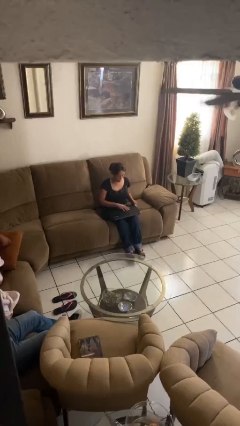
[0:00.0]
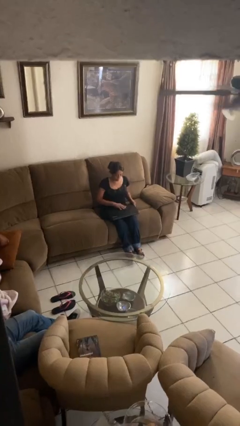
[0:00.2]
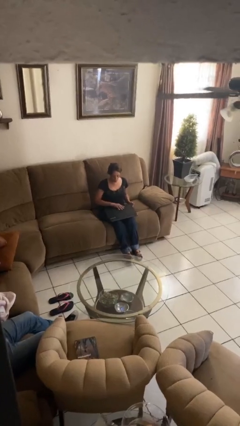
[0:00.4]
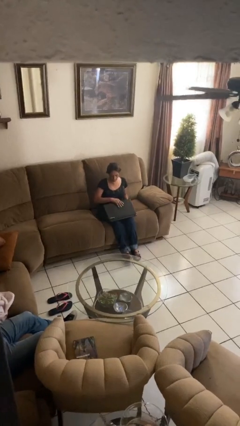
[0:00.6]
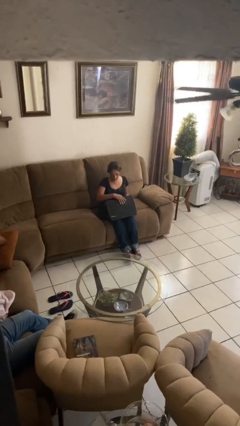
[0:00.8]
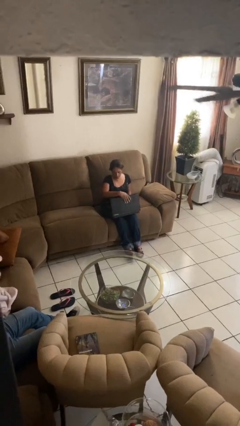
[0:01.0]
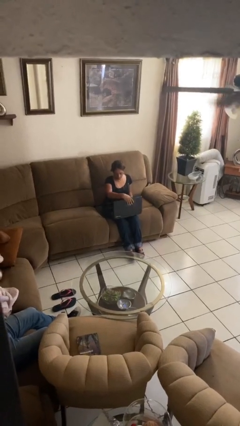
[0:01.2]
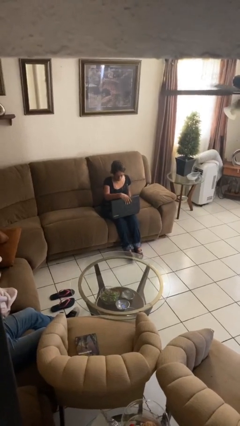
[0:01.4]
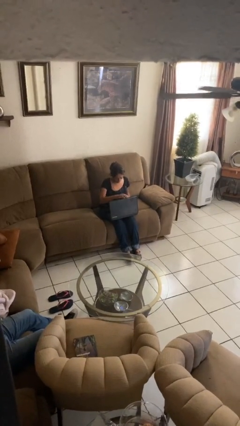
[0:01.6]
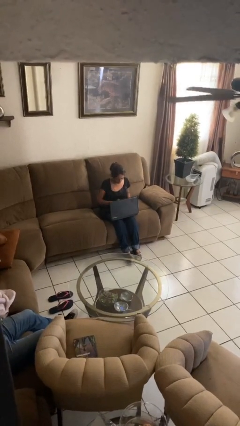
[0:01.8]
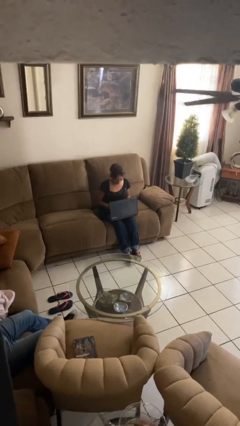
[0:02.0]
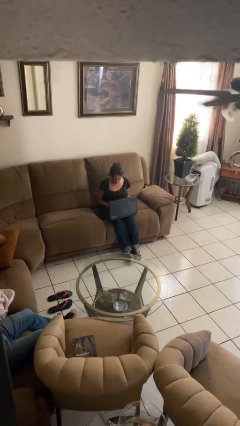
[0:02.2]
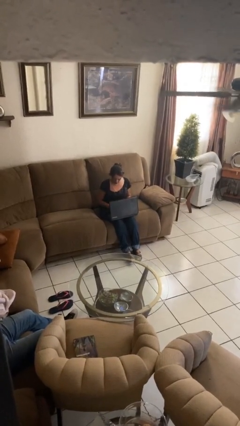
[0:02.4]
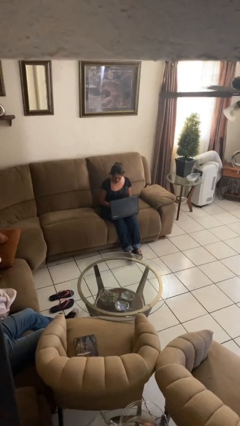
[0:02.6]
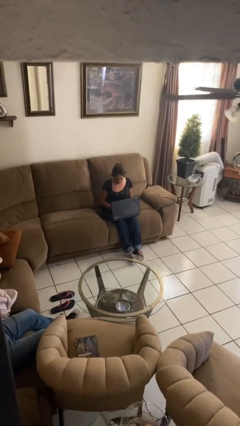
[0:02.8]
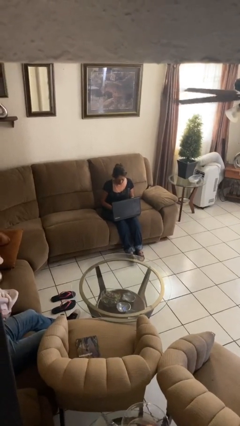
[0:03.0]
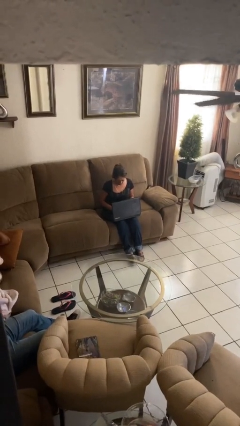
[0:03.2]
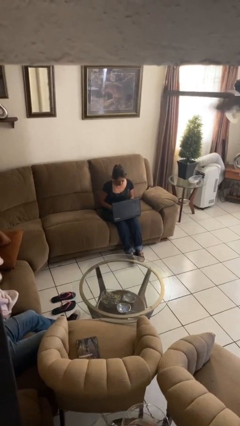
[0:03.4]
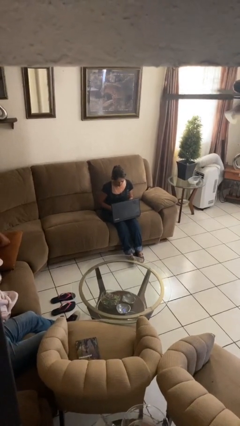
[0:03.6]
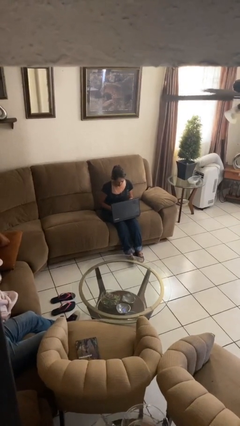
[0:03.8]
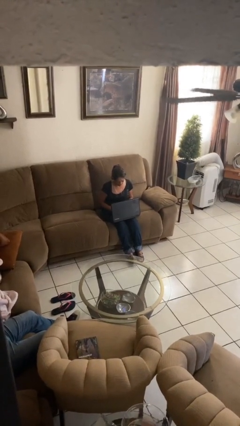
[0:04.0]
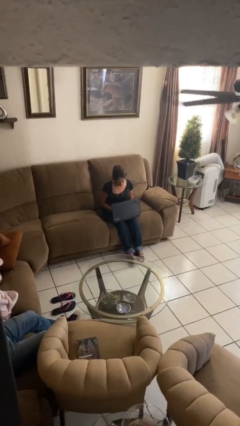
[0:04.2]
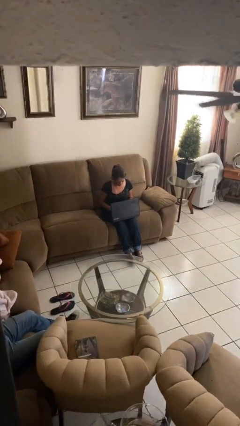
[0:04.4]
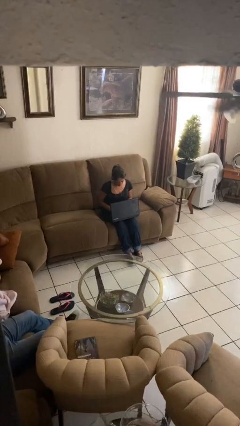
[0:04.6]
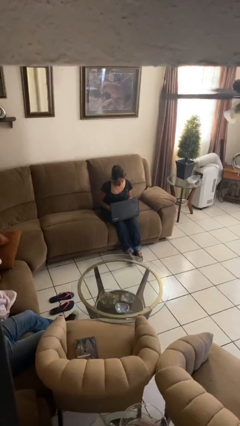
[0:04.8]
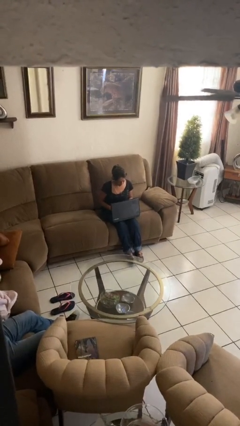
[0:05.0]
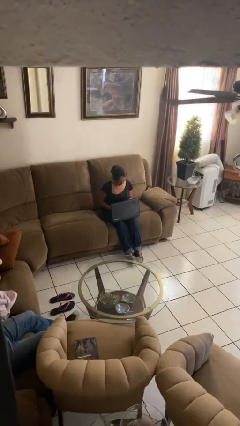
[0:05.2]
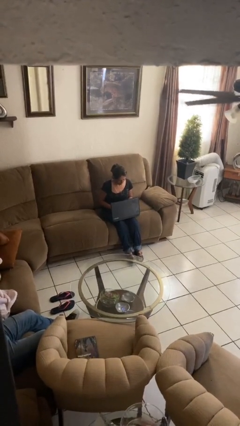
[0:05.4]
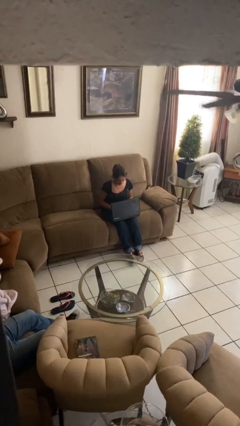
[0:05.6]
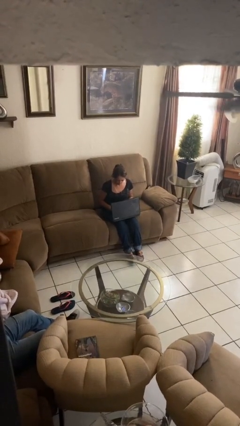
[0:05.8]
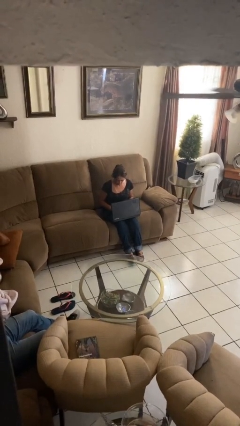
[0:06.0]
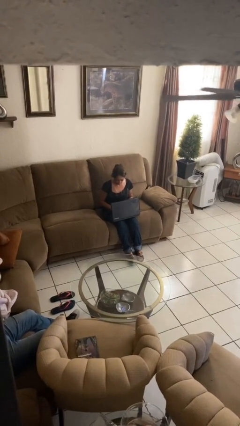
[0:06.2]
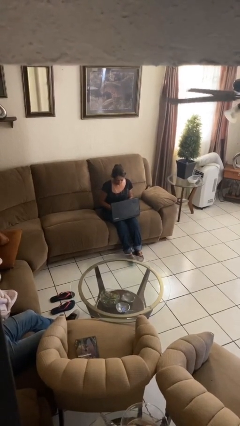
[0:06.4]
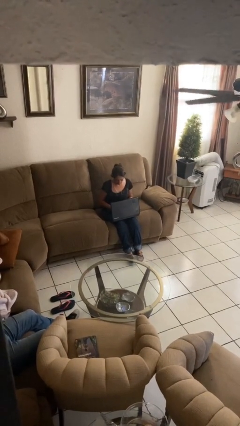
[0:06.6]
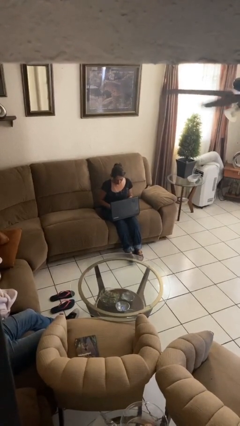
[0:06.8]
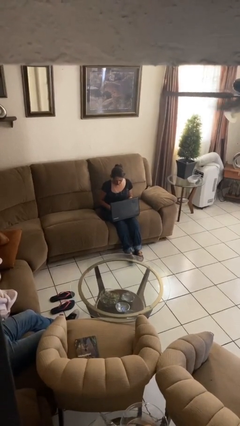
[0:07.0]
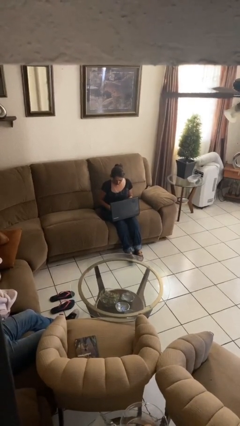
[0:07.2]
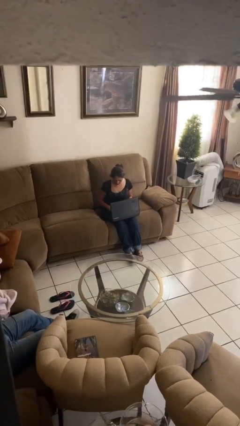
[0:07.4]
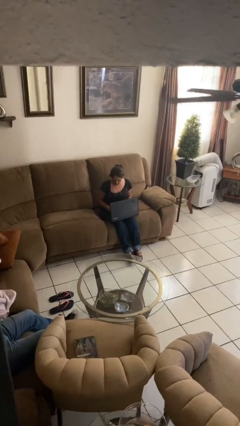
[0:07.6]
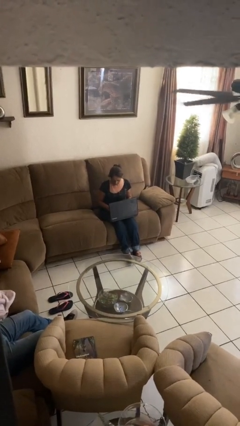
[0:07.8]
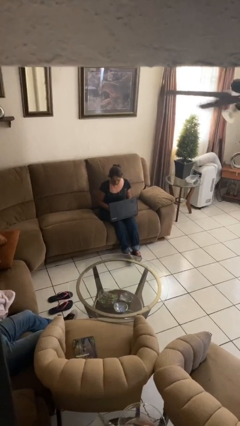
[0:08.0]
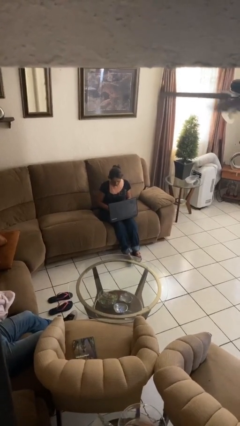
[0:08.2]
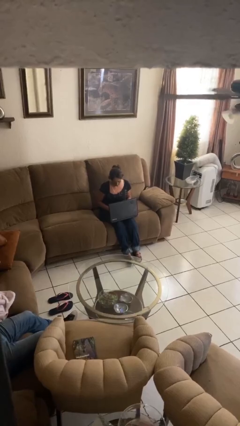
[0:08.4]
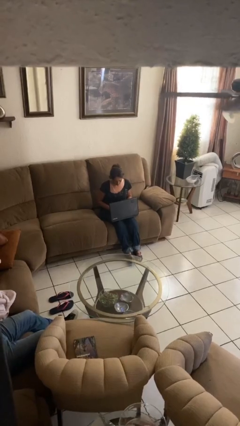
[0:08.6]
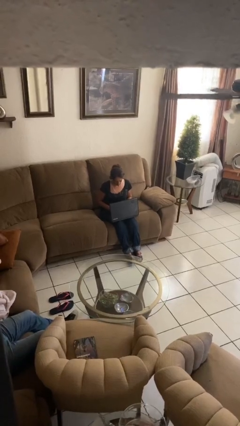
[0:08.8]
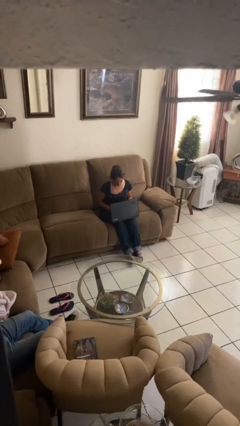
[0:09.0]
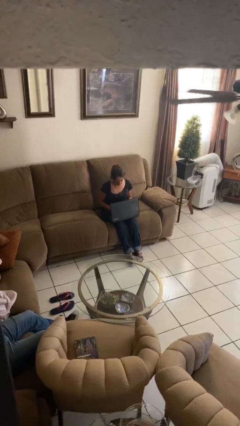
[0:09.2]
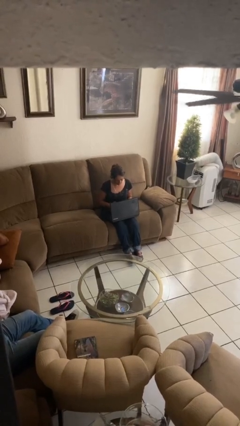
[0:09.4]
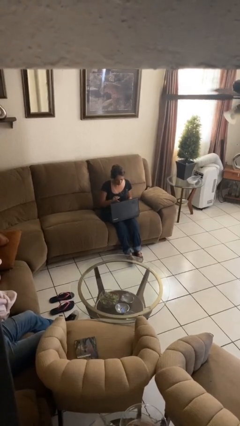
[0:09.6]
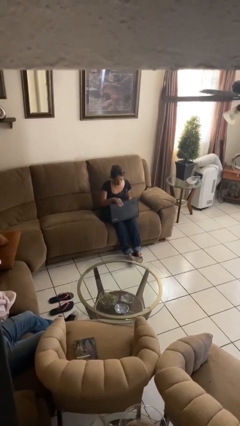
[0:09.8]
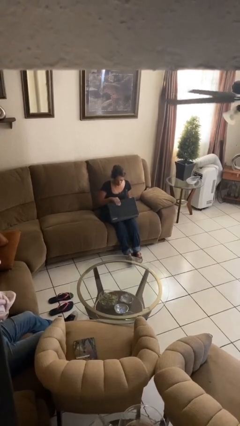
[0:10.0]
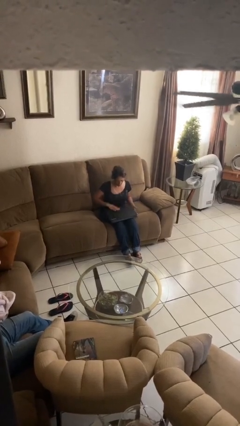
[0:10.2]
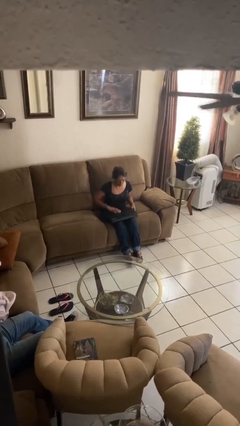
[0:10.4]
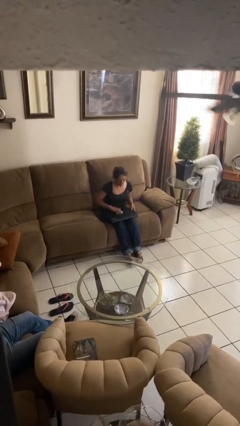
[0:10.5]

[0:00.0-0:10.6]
person interacts with laptop

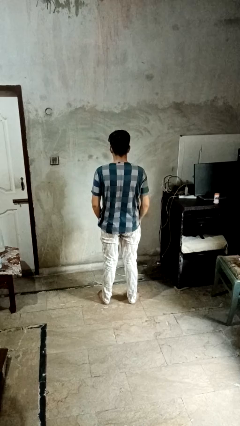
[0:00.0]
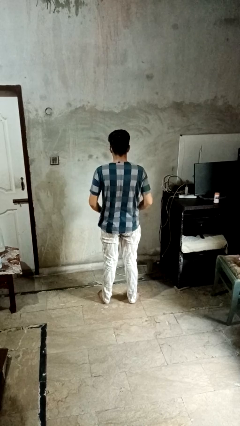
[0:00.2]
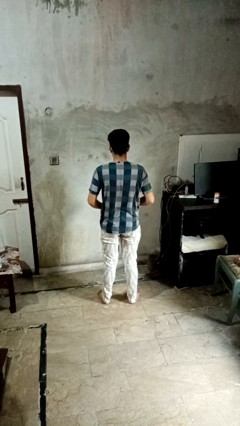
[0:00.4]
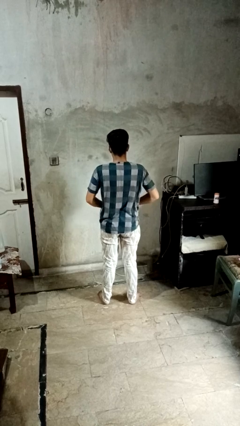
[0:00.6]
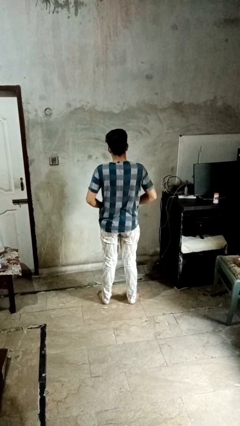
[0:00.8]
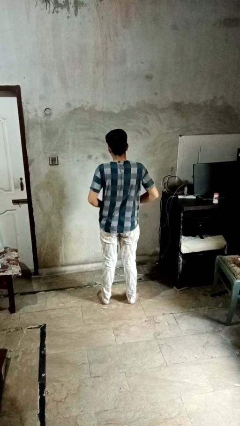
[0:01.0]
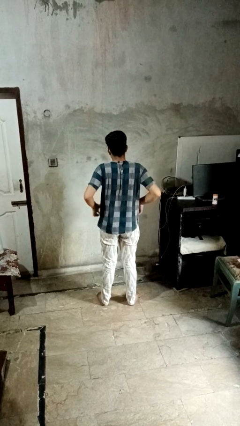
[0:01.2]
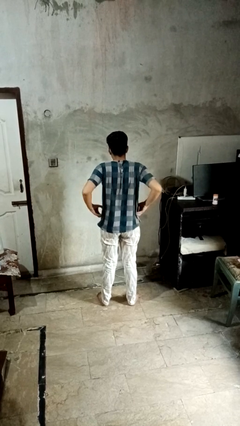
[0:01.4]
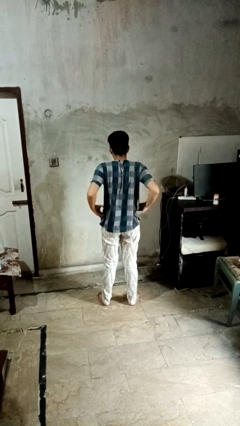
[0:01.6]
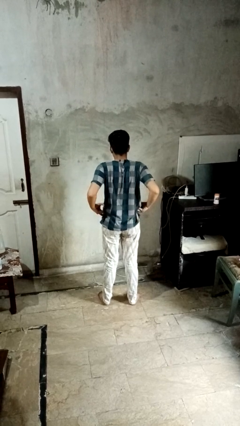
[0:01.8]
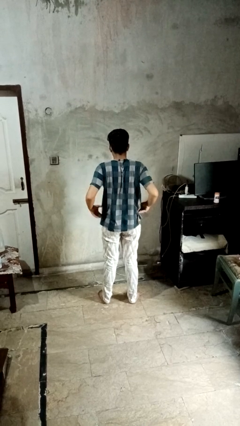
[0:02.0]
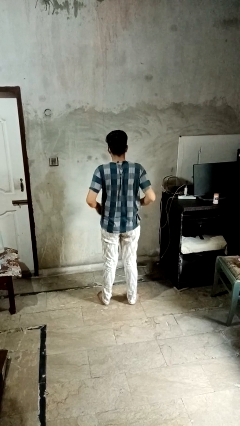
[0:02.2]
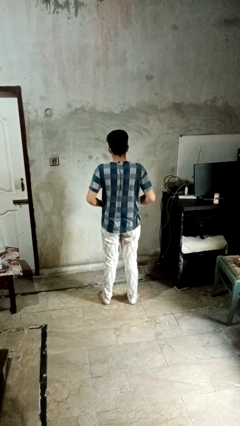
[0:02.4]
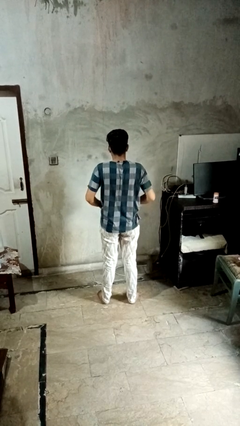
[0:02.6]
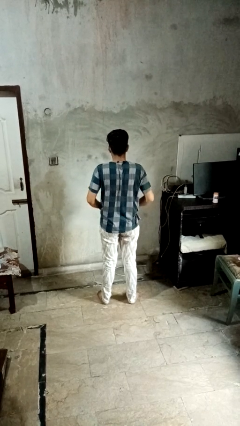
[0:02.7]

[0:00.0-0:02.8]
person hikes up pants

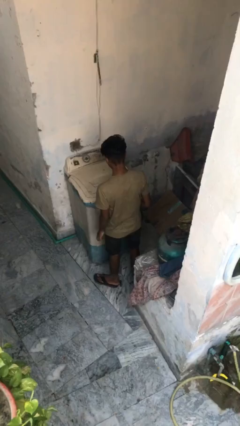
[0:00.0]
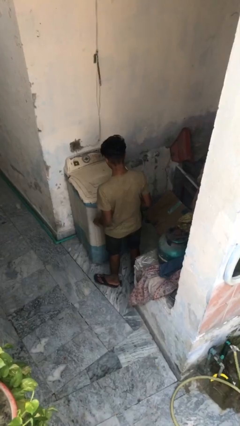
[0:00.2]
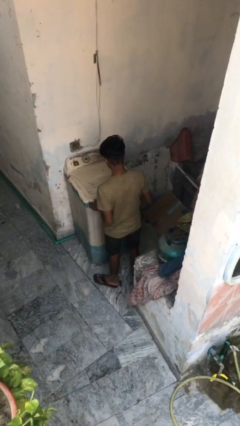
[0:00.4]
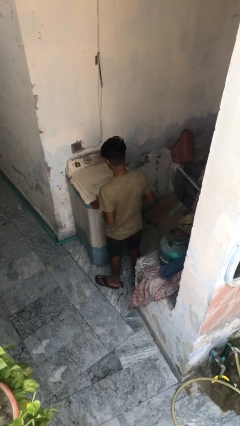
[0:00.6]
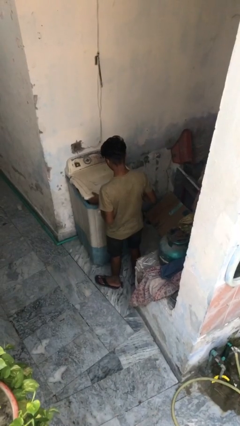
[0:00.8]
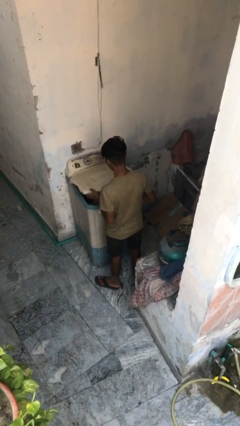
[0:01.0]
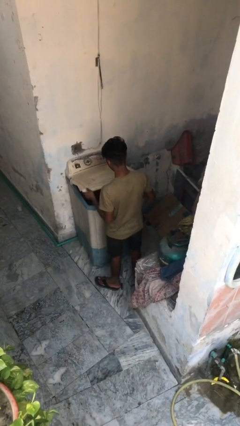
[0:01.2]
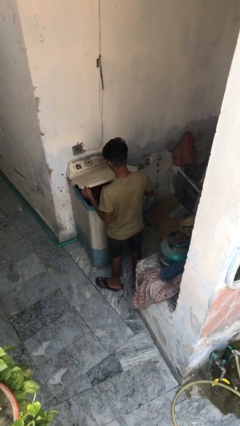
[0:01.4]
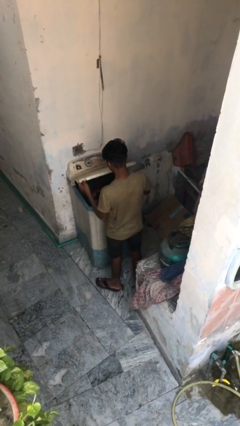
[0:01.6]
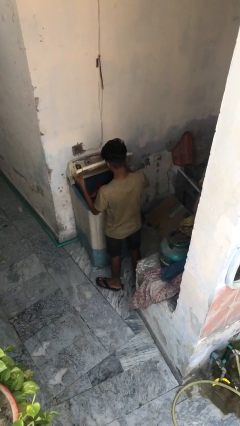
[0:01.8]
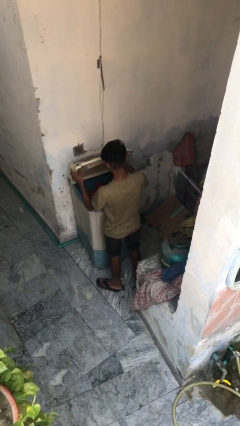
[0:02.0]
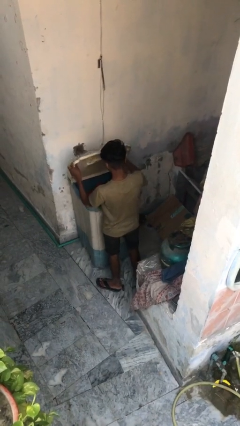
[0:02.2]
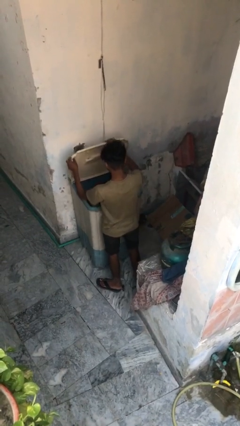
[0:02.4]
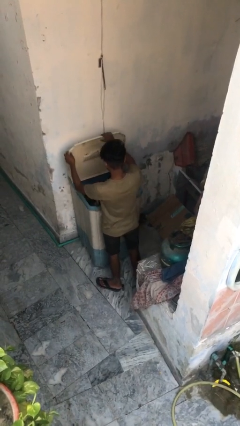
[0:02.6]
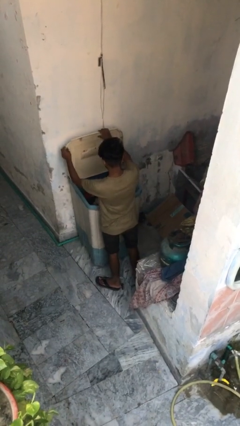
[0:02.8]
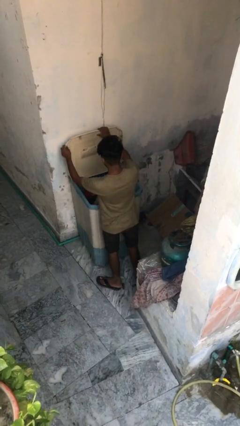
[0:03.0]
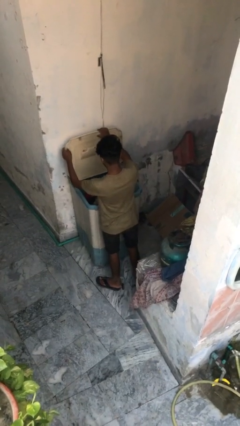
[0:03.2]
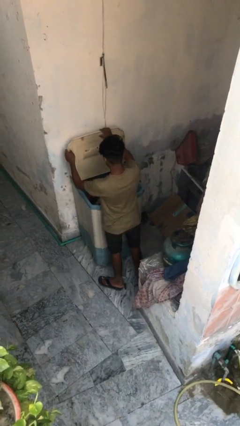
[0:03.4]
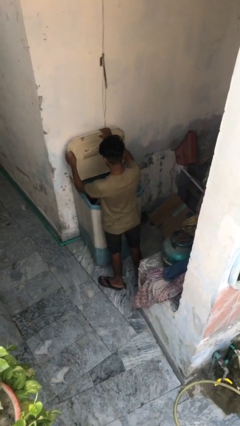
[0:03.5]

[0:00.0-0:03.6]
person opens clothes washer

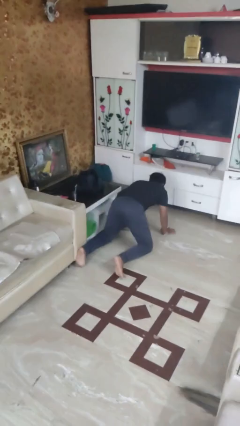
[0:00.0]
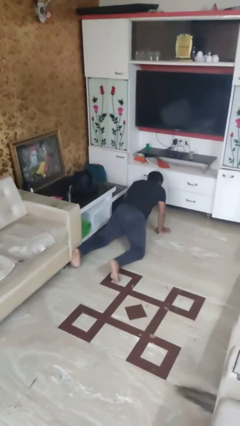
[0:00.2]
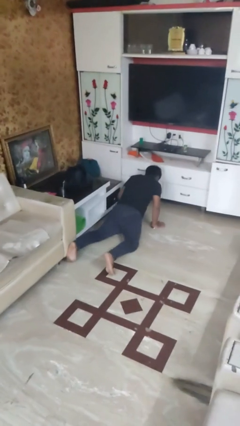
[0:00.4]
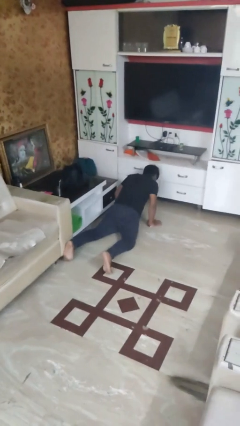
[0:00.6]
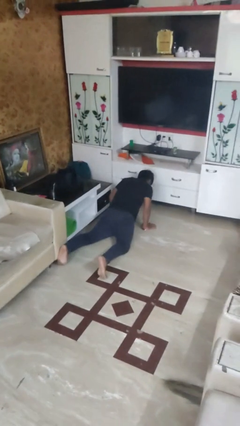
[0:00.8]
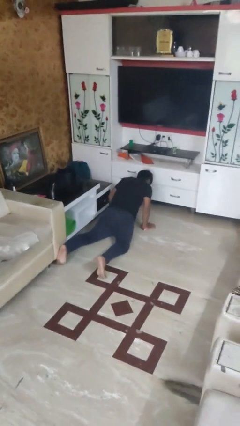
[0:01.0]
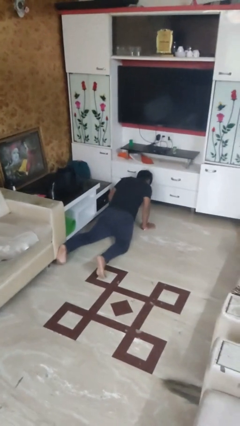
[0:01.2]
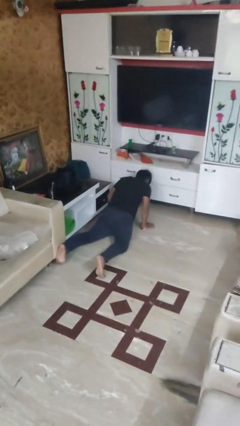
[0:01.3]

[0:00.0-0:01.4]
person lies down on floor
